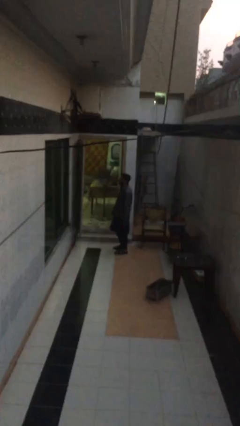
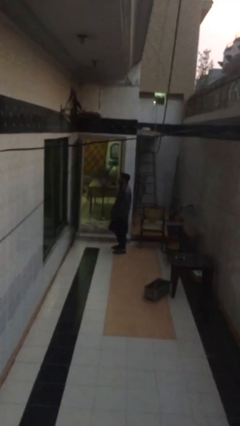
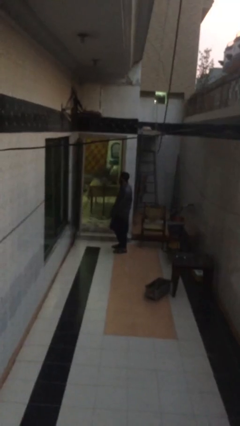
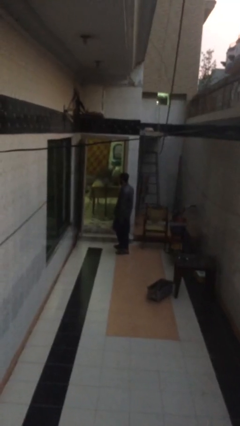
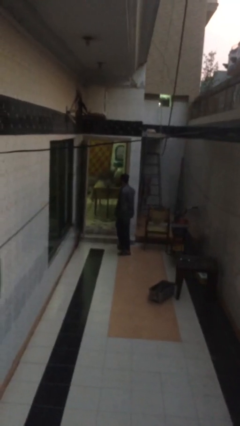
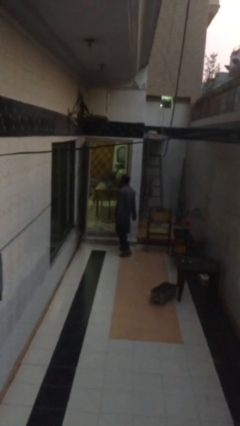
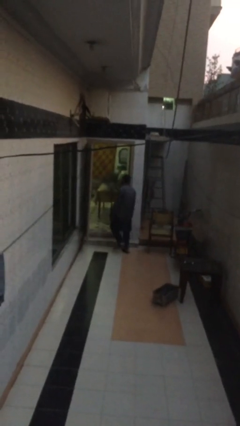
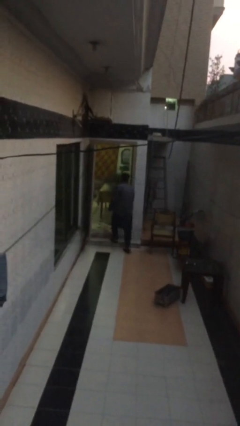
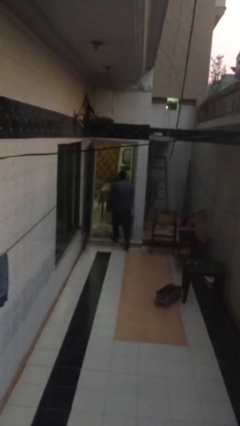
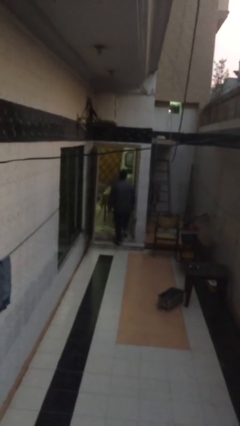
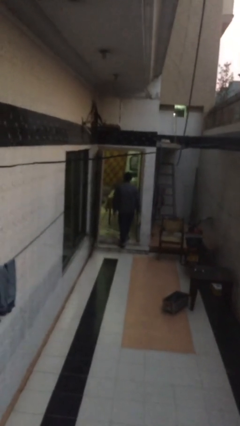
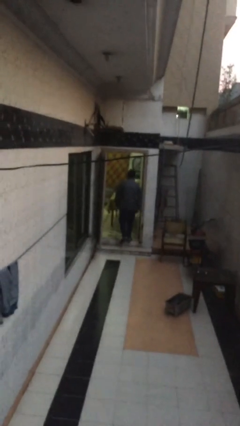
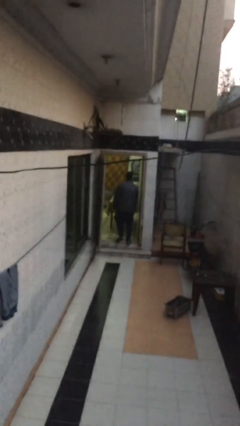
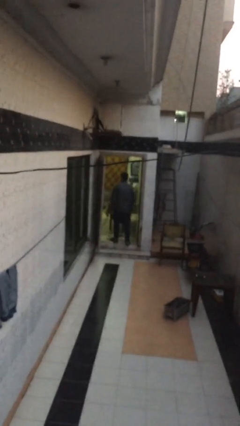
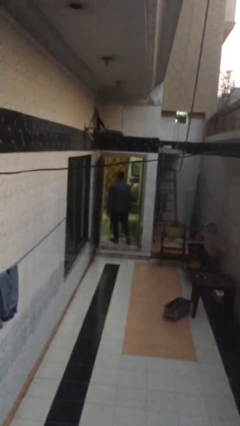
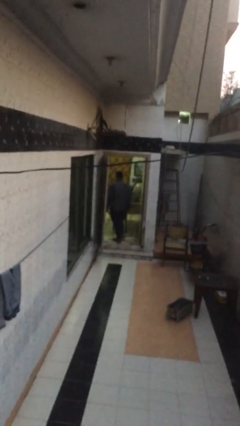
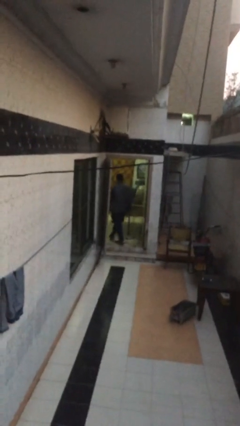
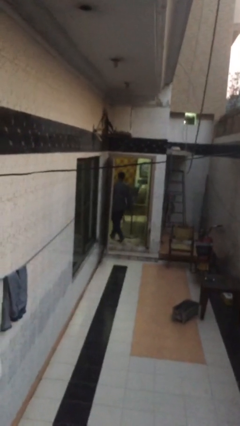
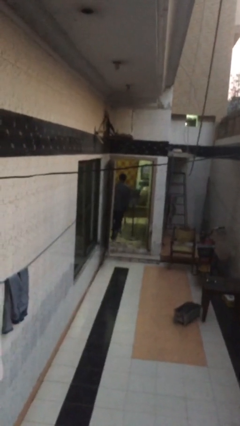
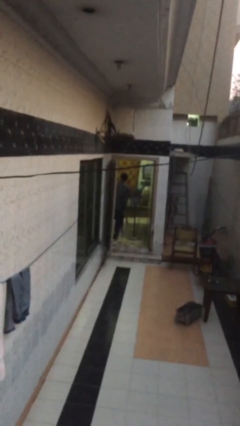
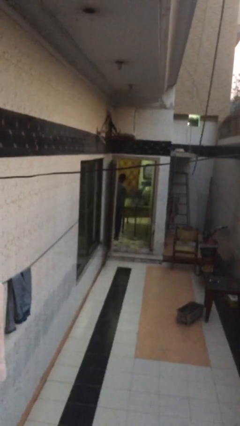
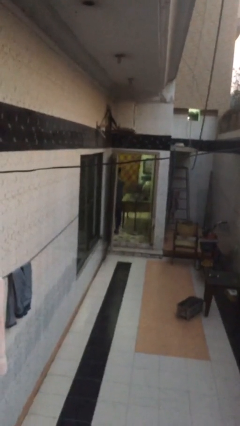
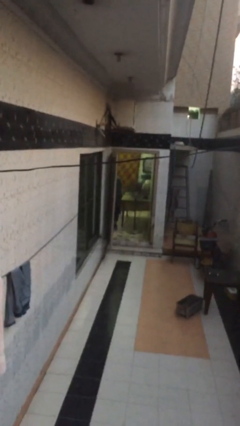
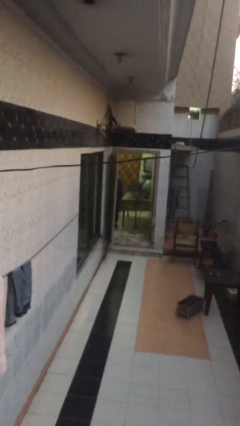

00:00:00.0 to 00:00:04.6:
person exits scene through structure

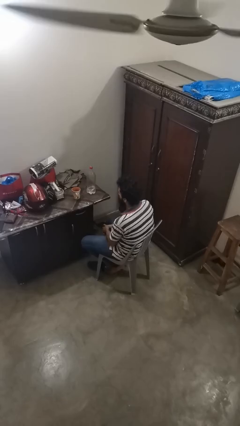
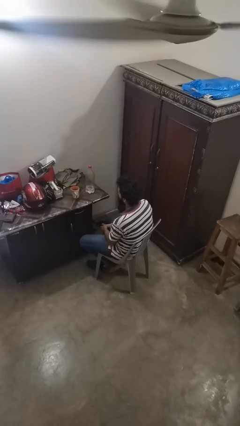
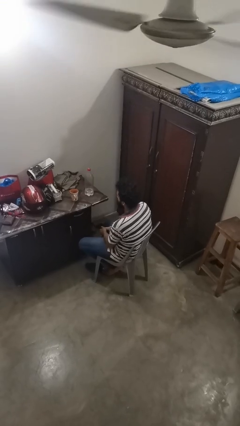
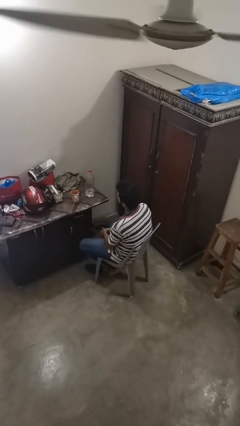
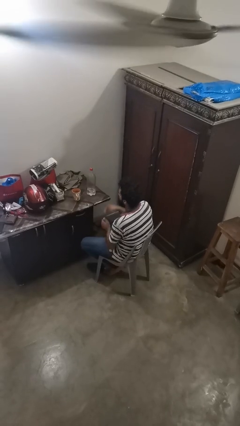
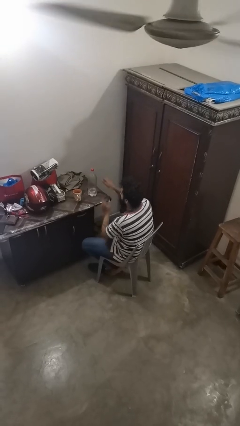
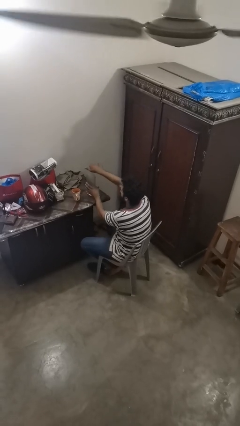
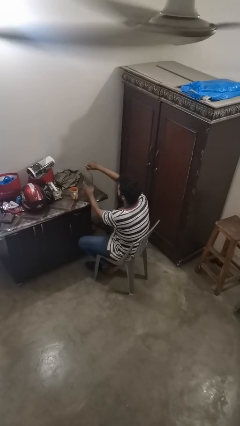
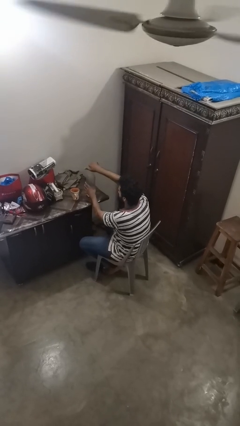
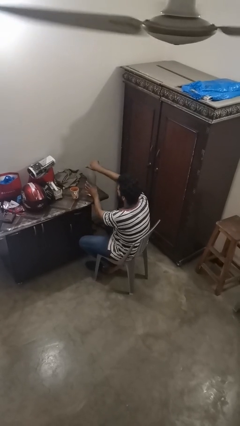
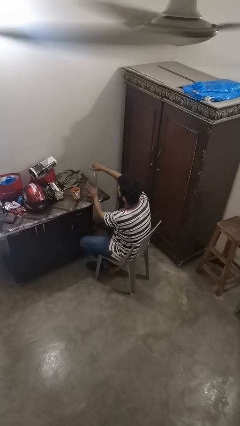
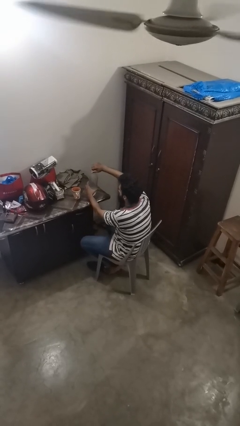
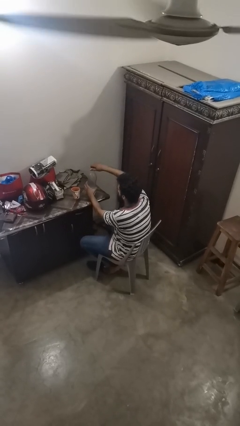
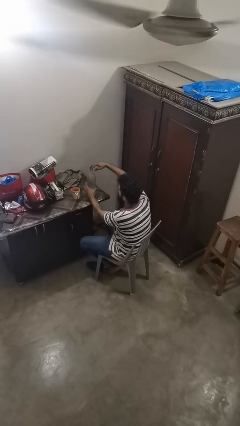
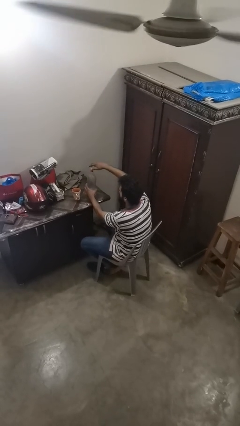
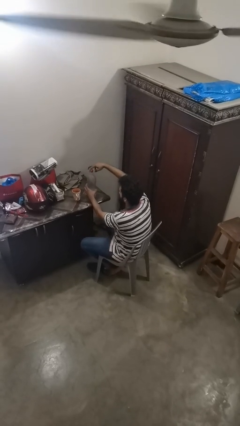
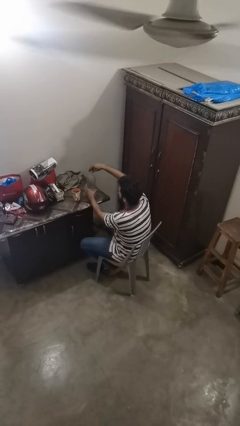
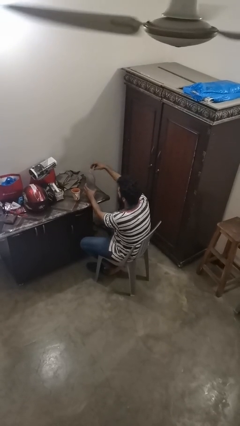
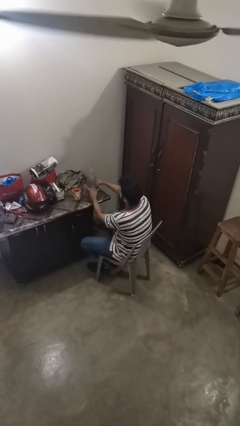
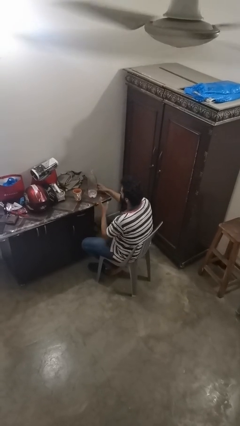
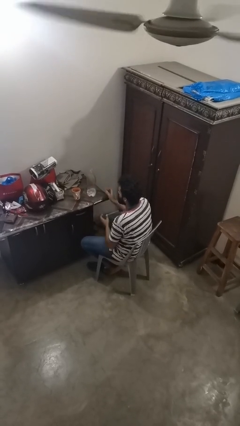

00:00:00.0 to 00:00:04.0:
person unscrews lid from bottle

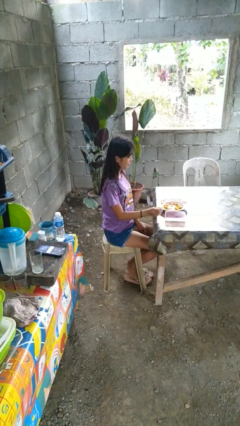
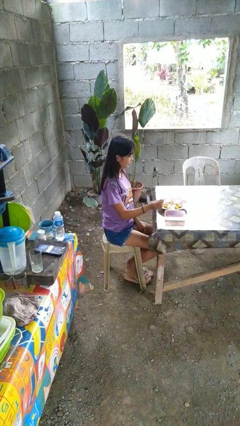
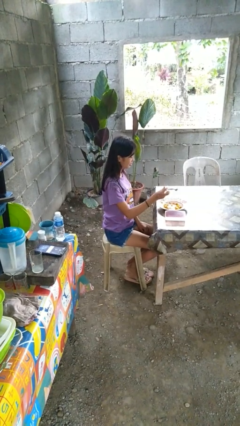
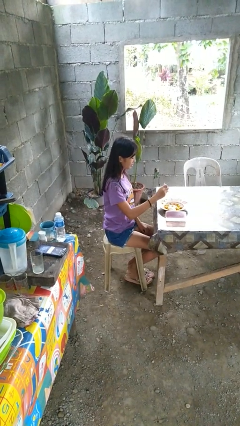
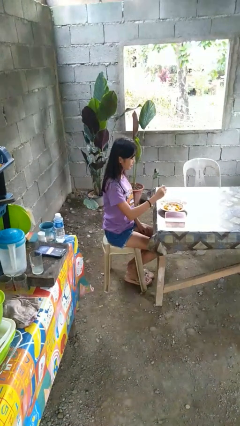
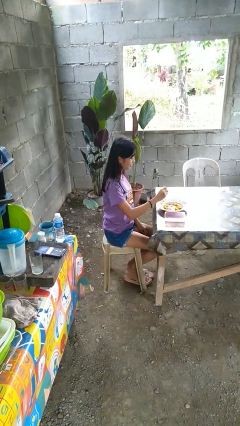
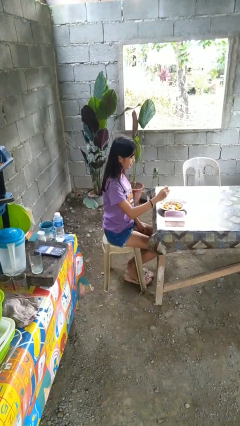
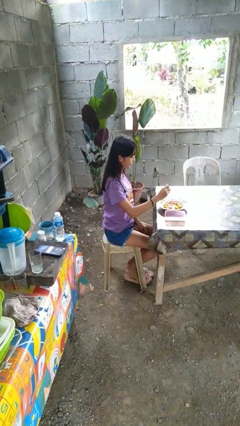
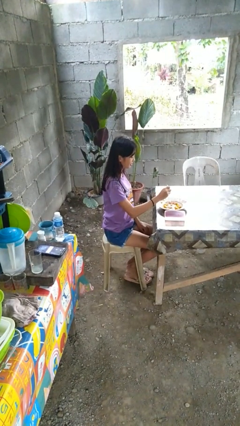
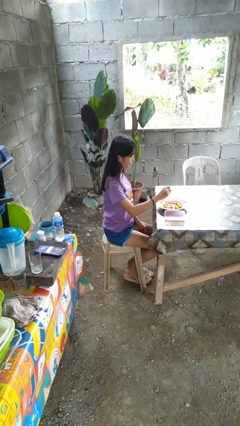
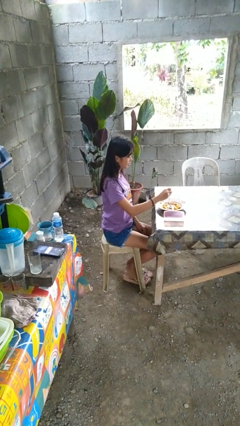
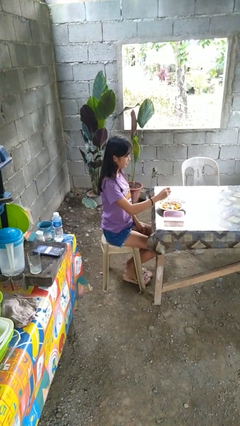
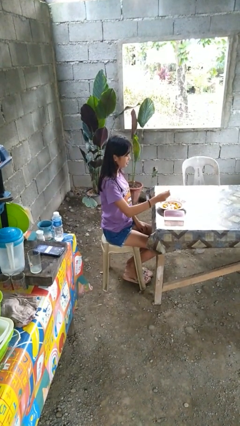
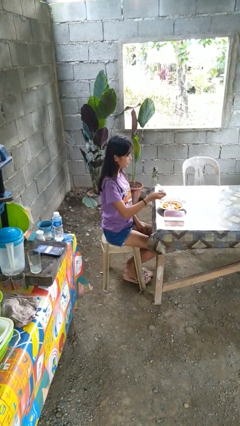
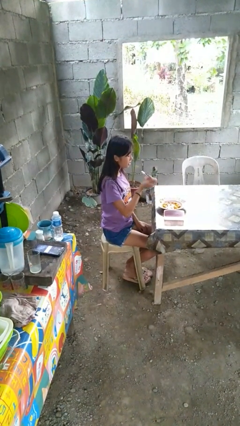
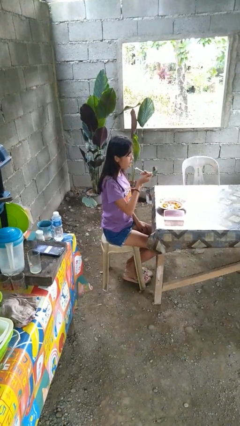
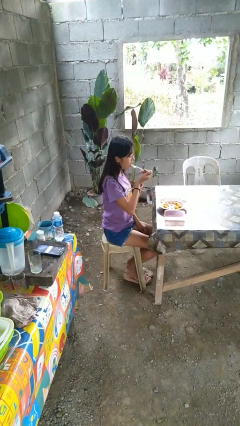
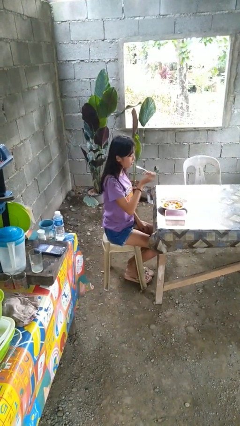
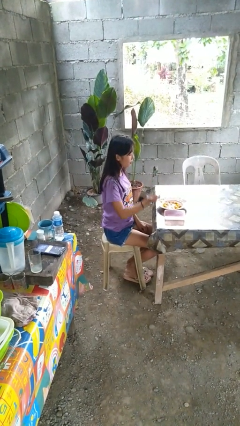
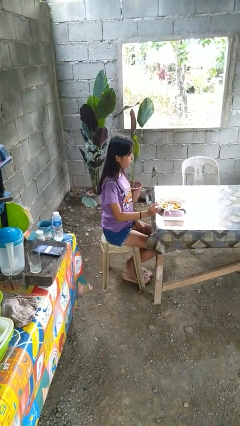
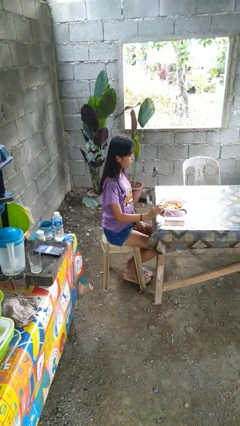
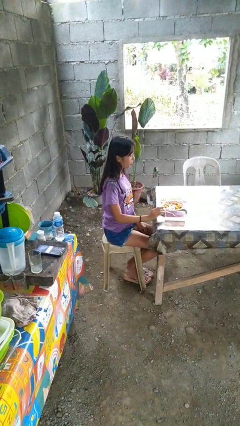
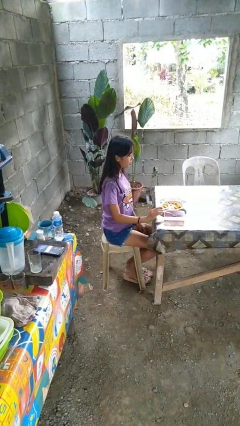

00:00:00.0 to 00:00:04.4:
person eats with utensil

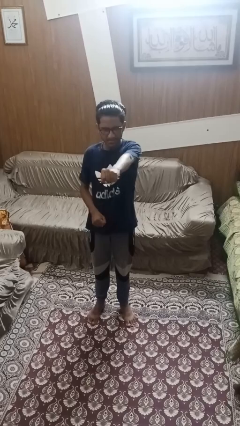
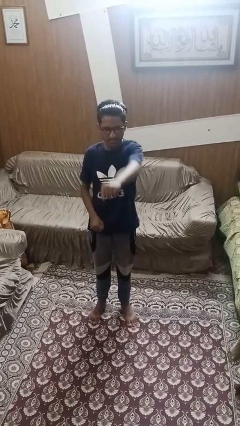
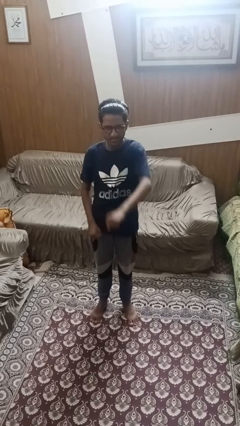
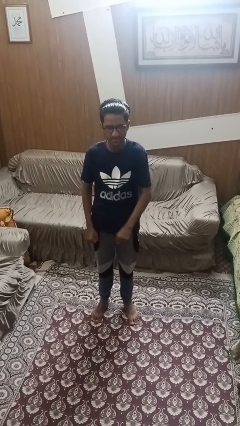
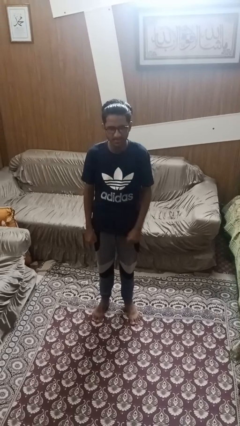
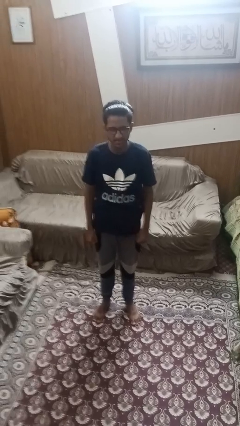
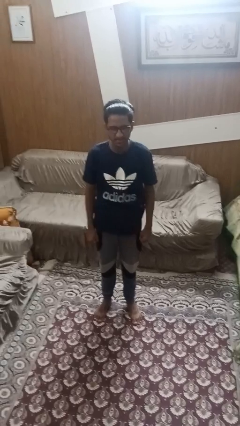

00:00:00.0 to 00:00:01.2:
person punches

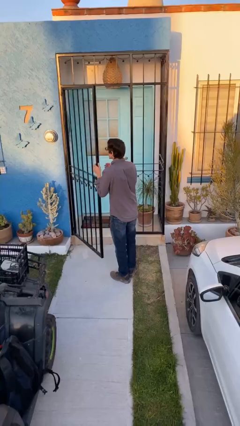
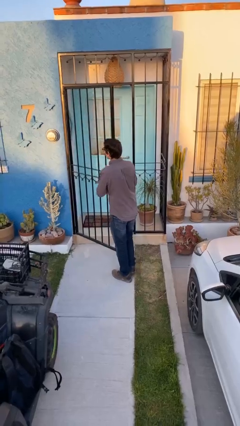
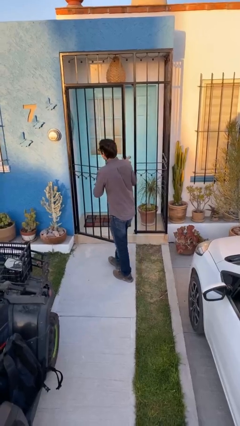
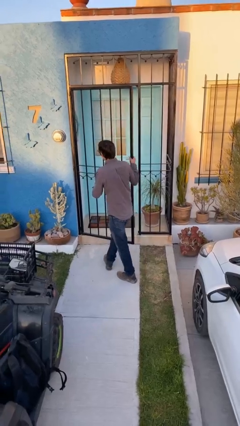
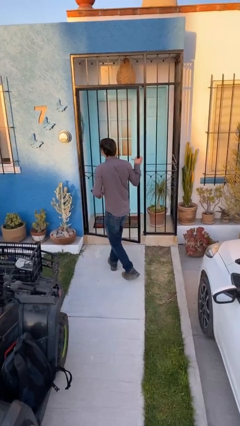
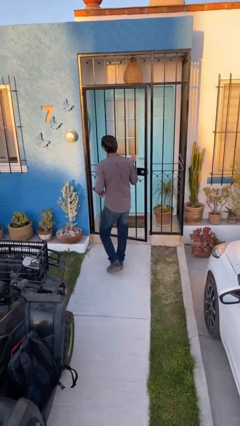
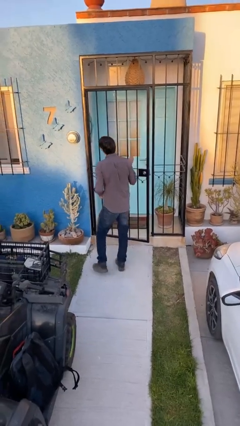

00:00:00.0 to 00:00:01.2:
person closes facility door

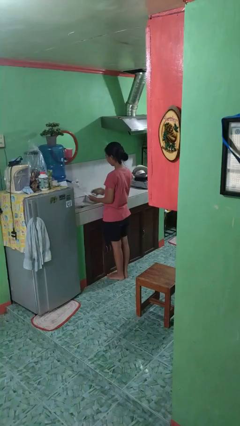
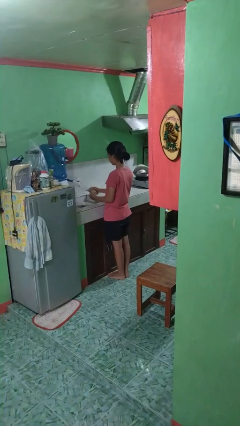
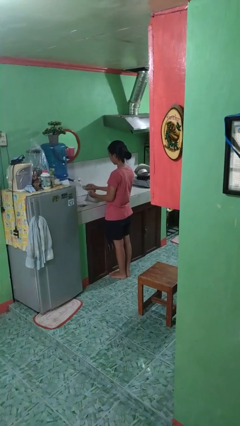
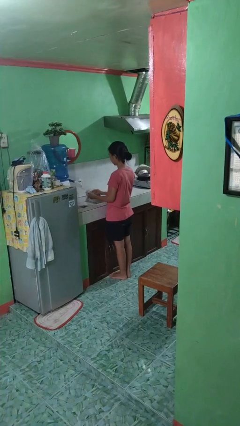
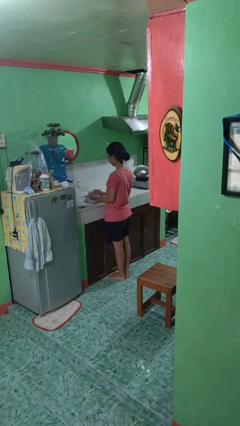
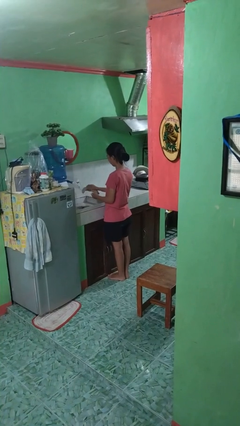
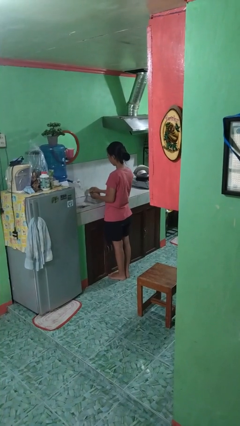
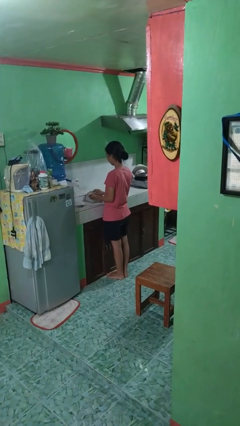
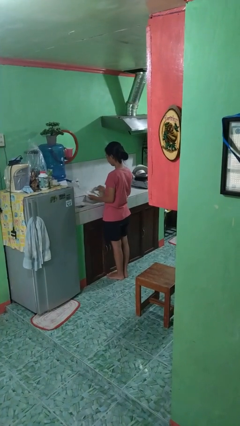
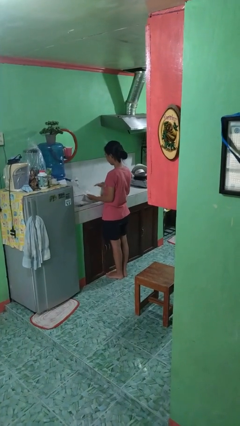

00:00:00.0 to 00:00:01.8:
person dries dish

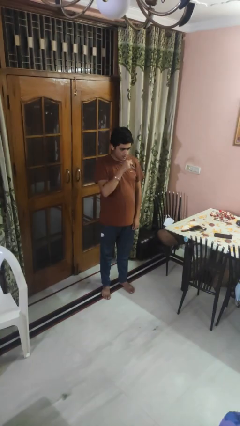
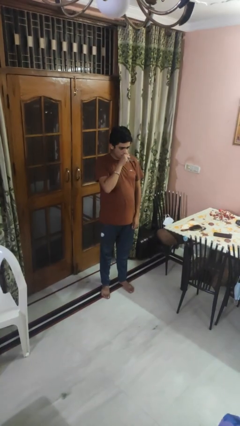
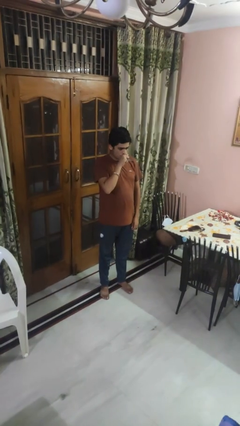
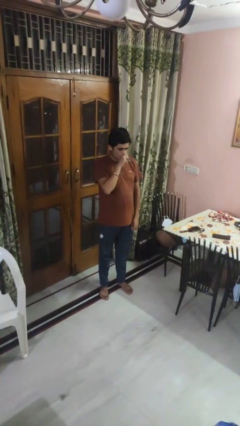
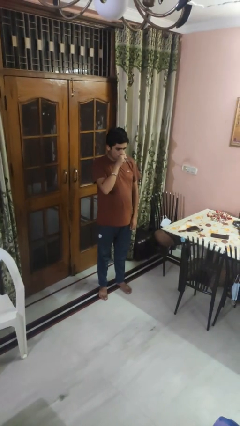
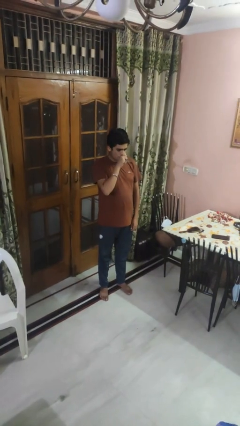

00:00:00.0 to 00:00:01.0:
person vapes
